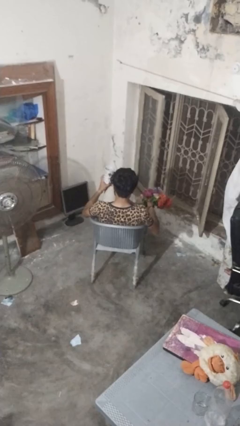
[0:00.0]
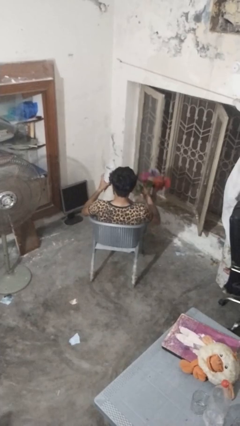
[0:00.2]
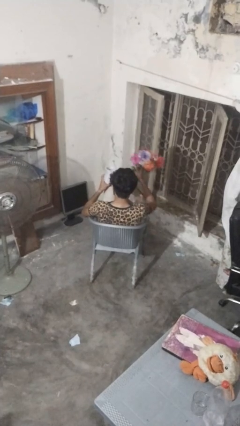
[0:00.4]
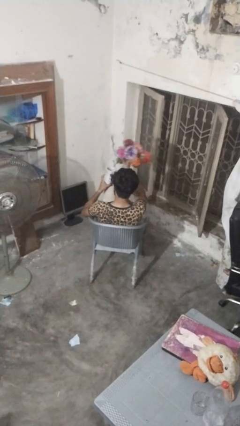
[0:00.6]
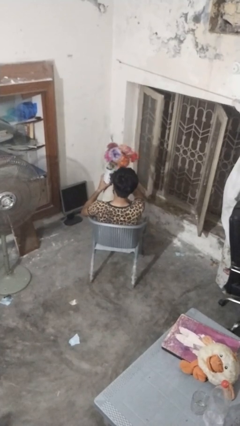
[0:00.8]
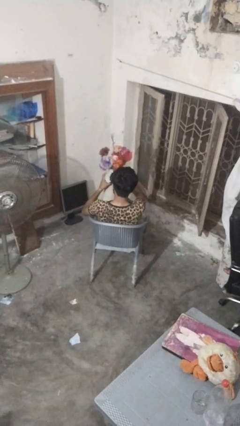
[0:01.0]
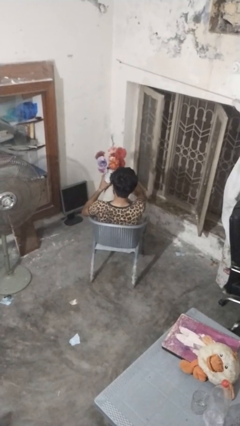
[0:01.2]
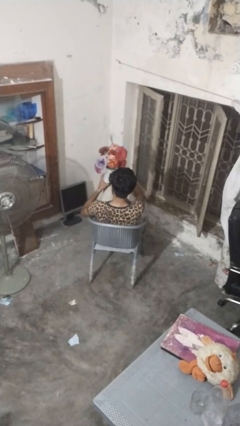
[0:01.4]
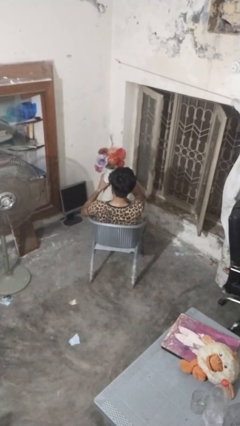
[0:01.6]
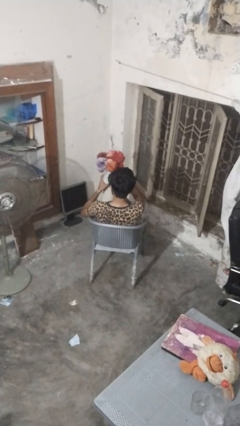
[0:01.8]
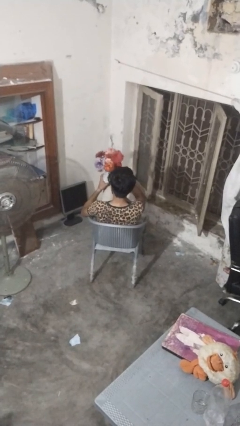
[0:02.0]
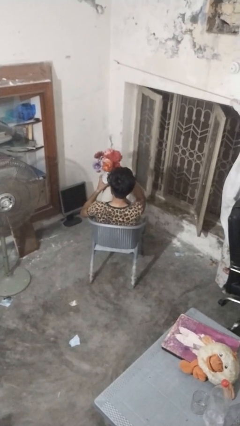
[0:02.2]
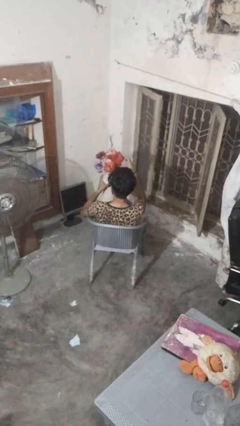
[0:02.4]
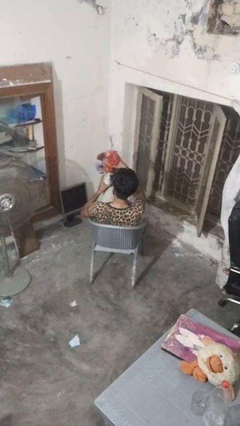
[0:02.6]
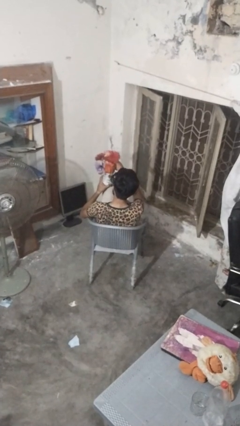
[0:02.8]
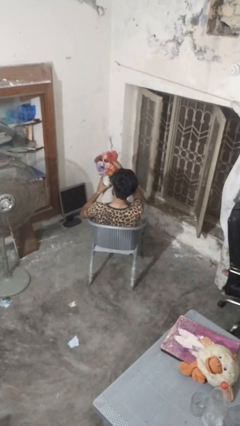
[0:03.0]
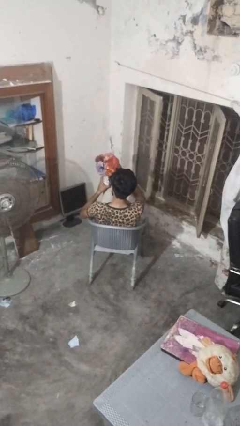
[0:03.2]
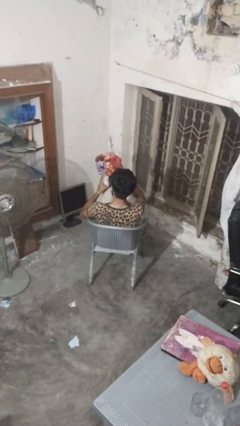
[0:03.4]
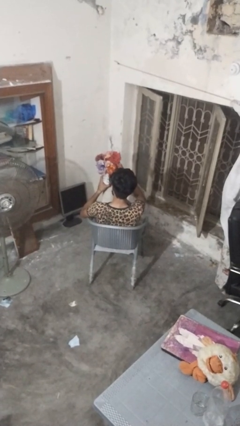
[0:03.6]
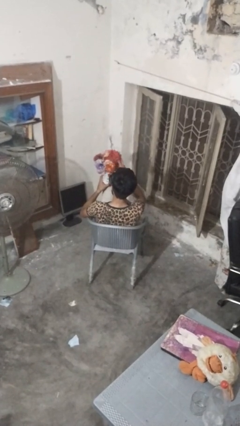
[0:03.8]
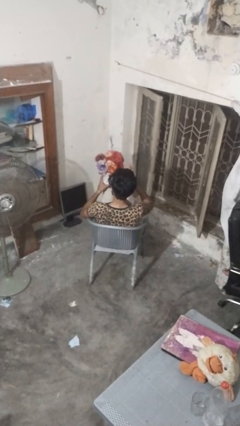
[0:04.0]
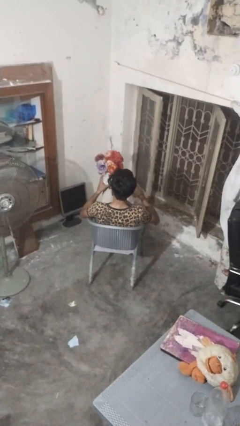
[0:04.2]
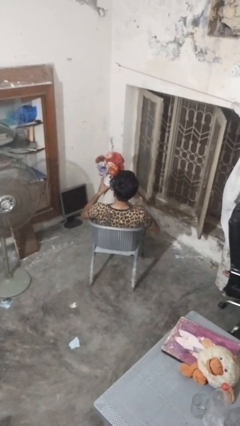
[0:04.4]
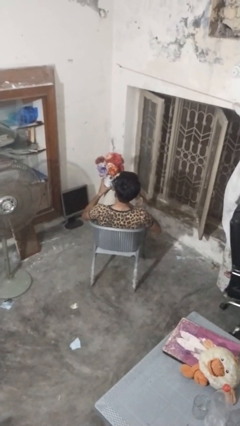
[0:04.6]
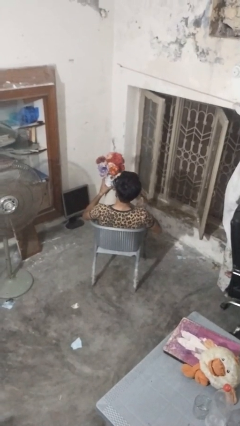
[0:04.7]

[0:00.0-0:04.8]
person arranges flowers in vase

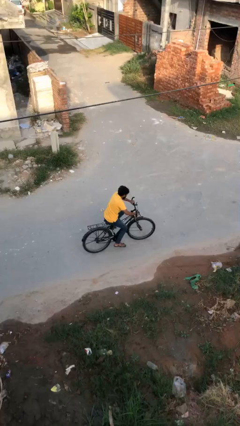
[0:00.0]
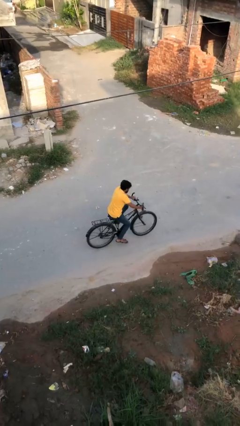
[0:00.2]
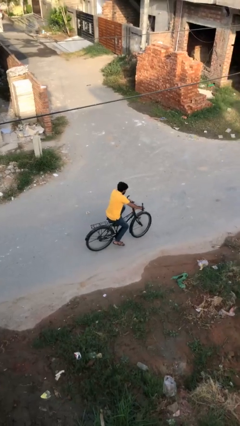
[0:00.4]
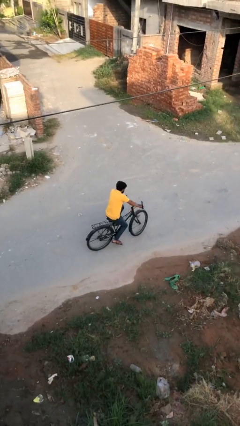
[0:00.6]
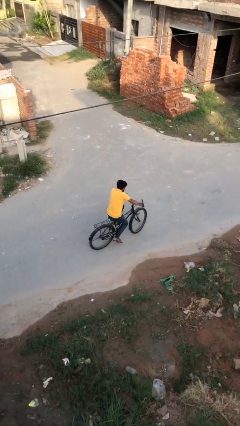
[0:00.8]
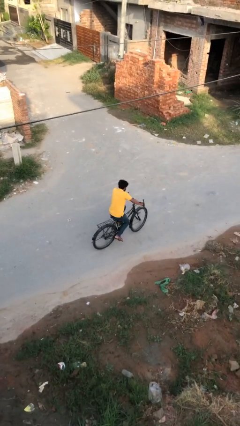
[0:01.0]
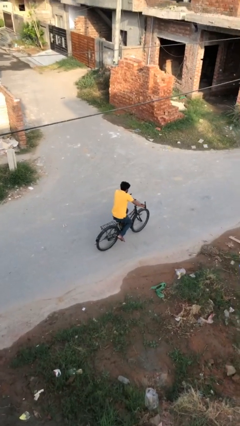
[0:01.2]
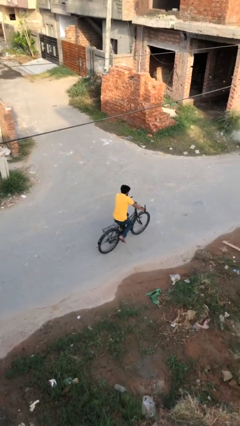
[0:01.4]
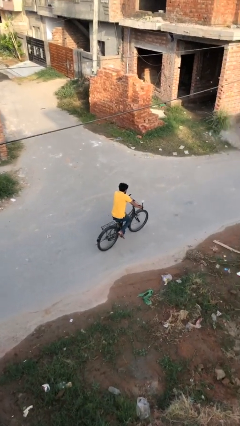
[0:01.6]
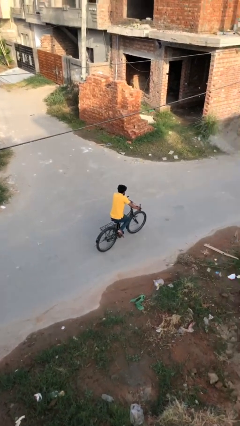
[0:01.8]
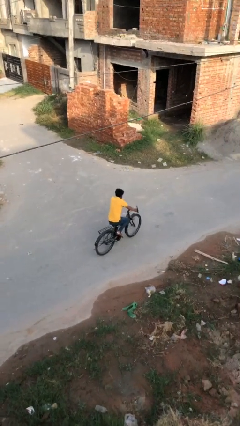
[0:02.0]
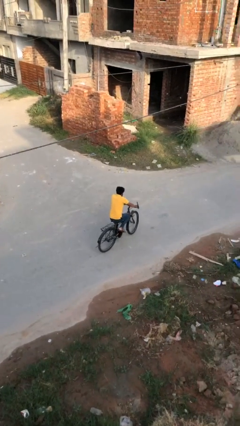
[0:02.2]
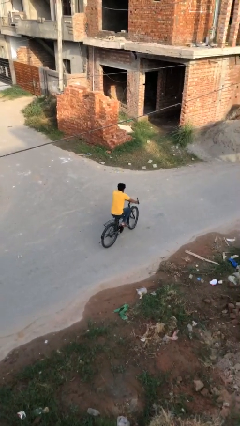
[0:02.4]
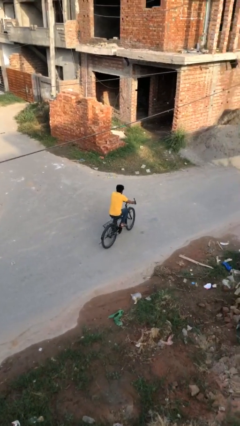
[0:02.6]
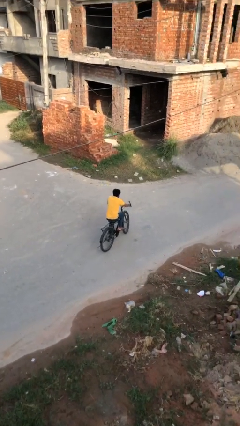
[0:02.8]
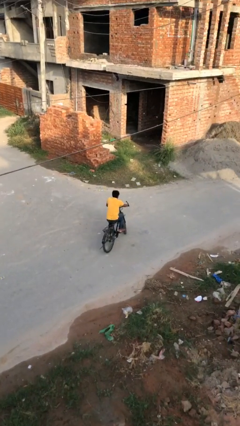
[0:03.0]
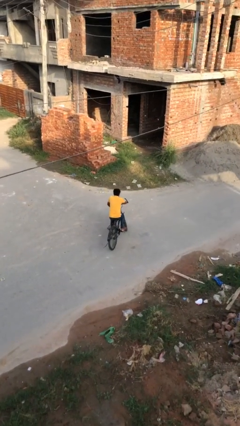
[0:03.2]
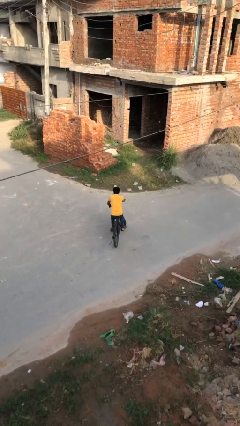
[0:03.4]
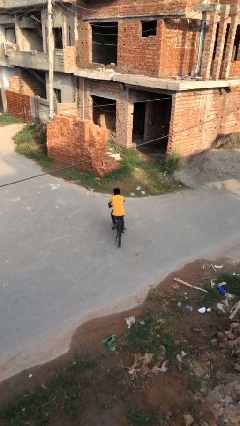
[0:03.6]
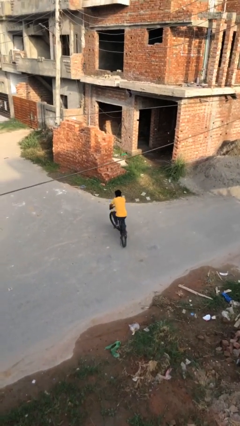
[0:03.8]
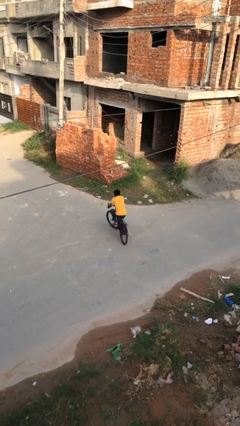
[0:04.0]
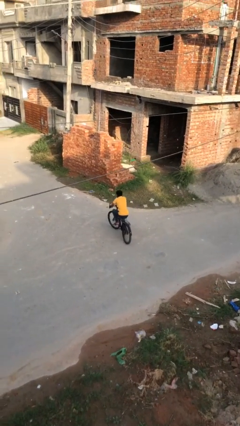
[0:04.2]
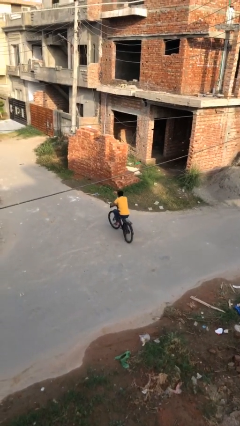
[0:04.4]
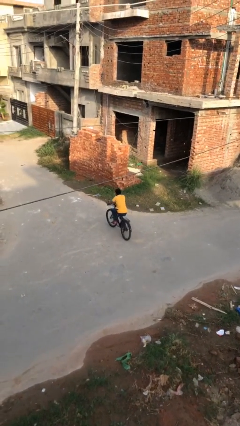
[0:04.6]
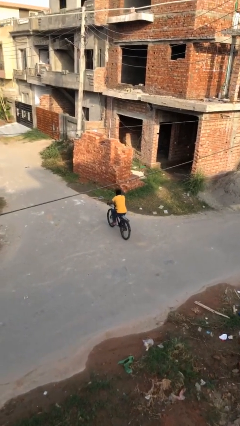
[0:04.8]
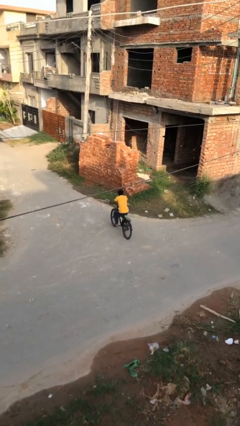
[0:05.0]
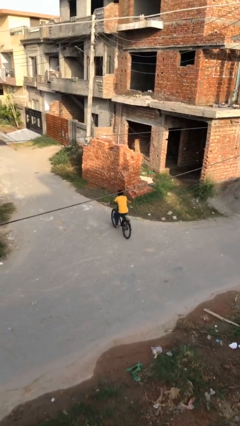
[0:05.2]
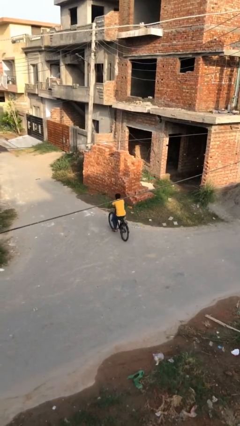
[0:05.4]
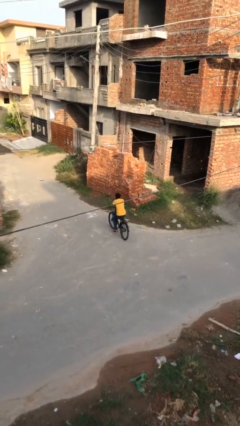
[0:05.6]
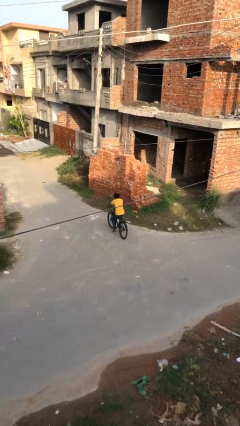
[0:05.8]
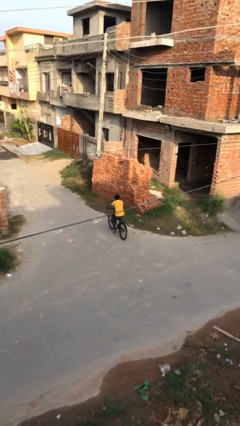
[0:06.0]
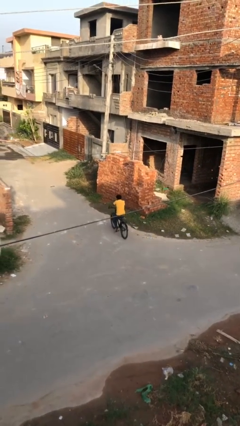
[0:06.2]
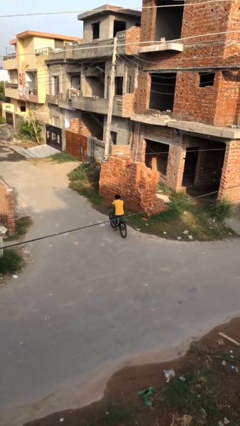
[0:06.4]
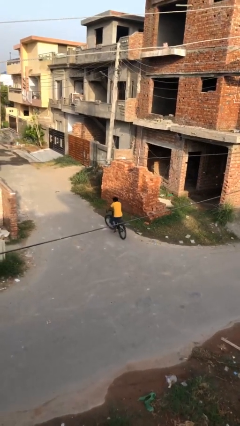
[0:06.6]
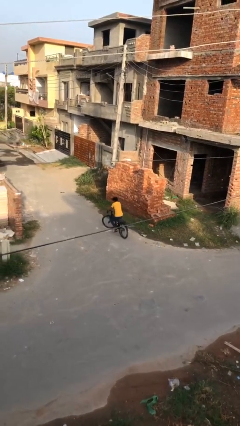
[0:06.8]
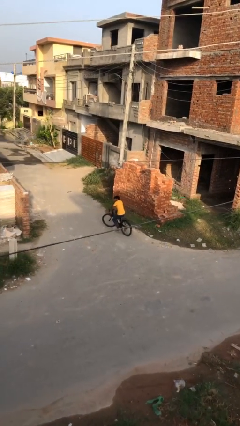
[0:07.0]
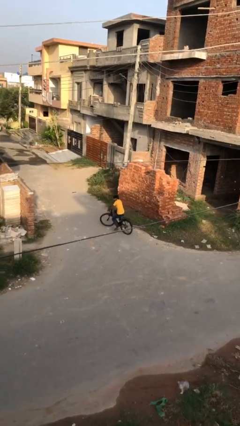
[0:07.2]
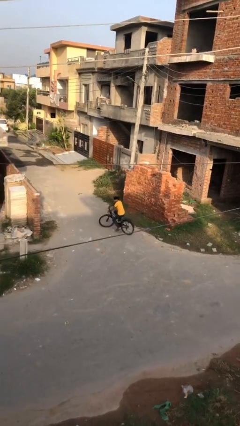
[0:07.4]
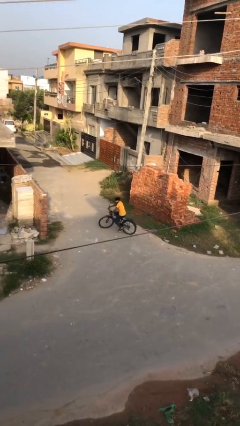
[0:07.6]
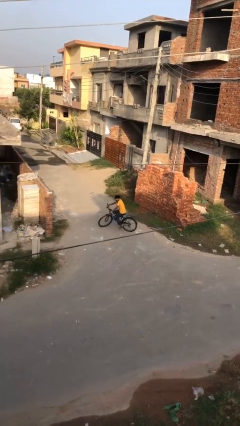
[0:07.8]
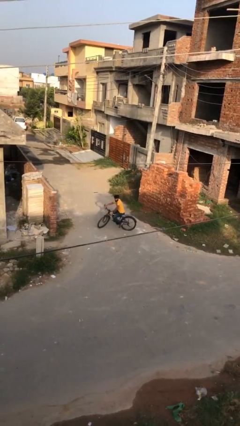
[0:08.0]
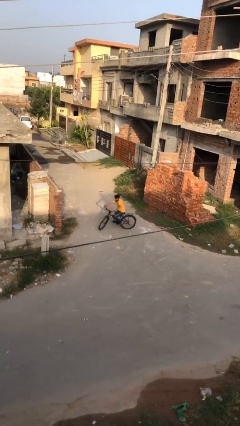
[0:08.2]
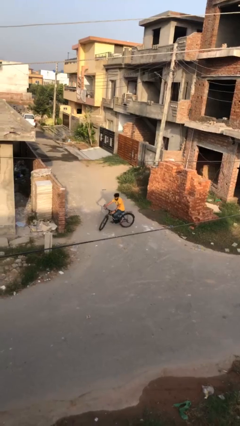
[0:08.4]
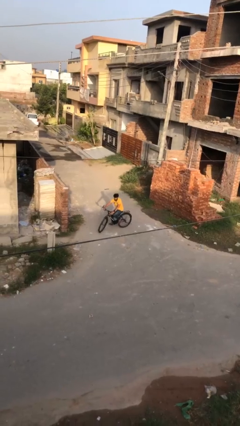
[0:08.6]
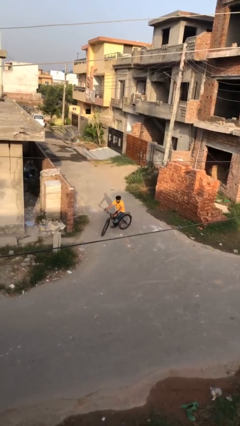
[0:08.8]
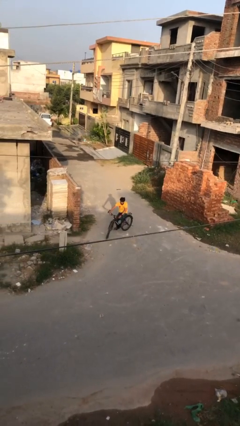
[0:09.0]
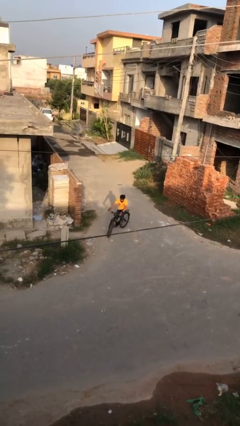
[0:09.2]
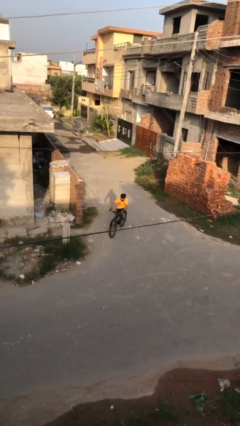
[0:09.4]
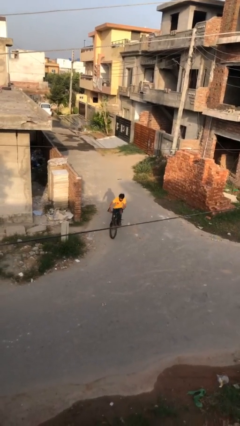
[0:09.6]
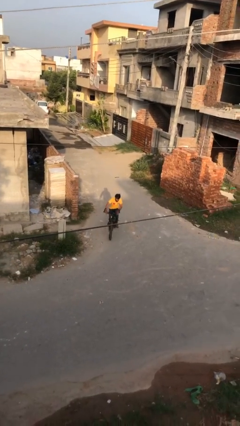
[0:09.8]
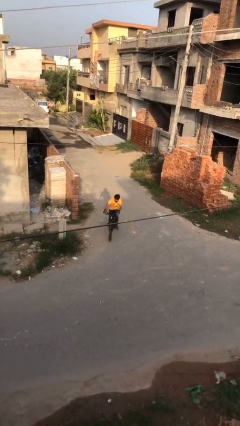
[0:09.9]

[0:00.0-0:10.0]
person rides bicycle

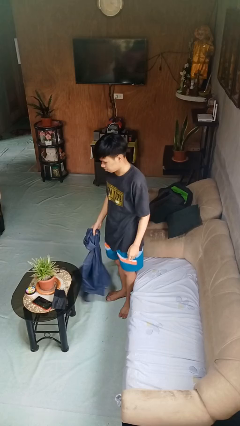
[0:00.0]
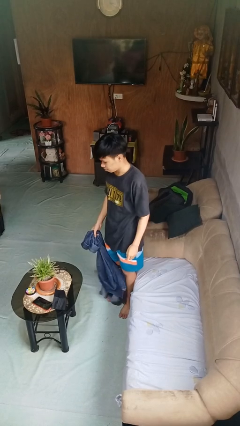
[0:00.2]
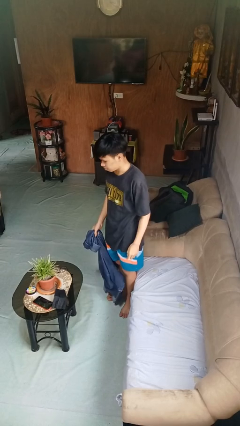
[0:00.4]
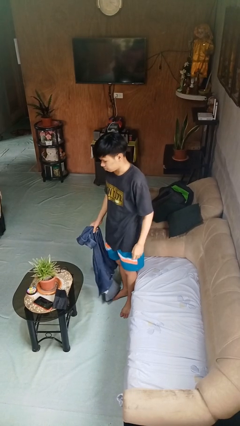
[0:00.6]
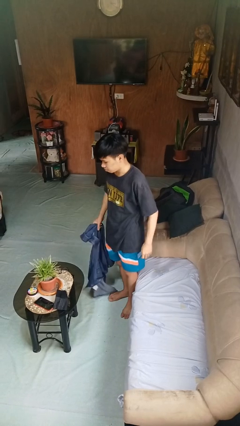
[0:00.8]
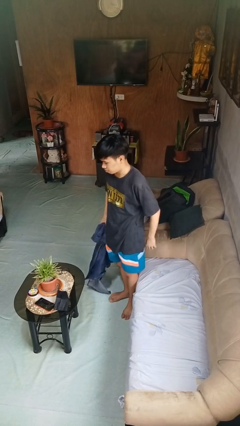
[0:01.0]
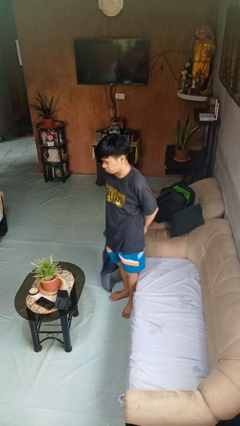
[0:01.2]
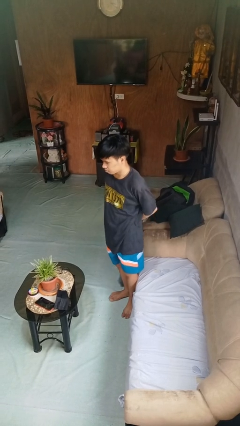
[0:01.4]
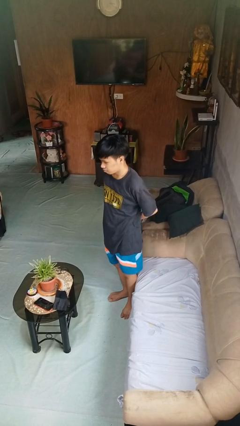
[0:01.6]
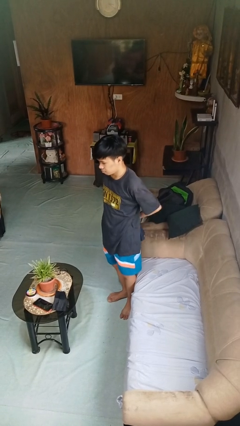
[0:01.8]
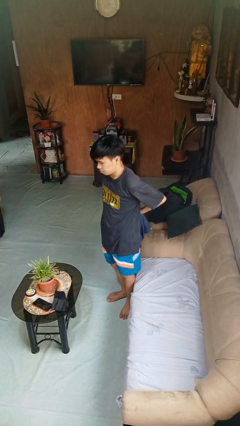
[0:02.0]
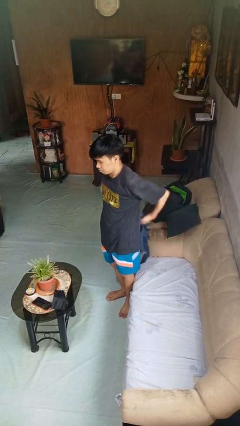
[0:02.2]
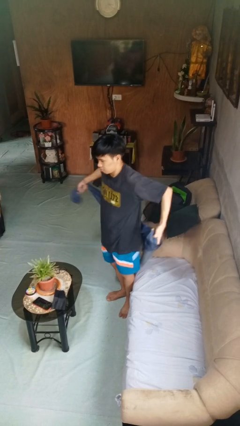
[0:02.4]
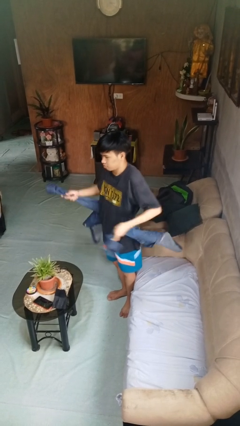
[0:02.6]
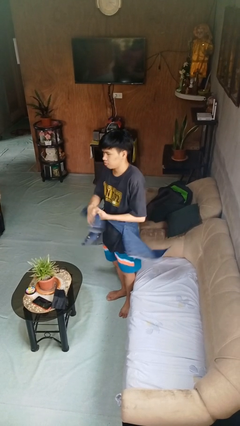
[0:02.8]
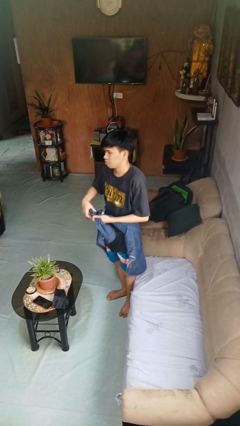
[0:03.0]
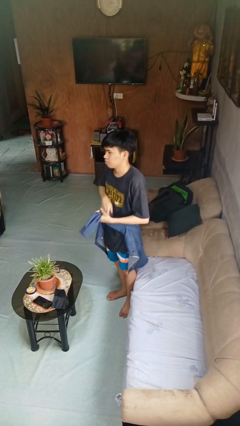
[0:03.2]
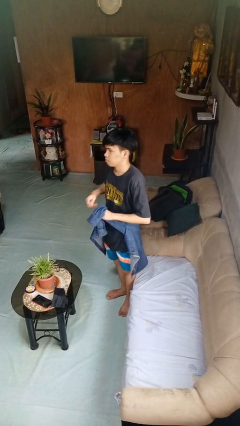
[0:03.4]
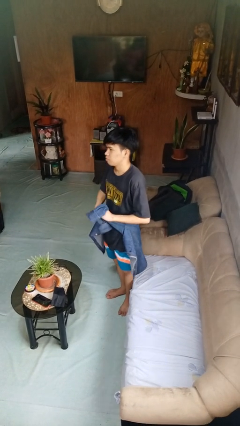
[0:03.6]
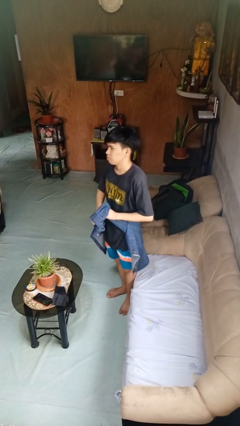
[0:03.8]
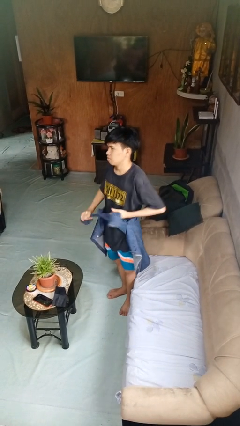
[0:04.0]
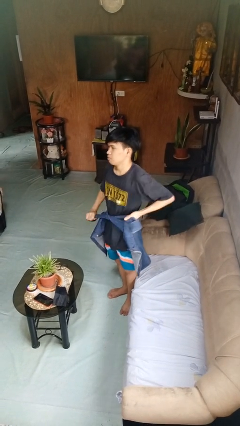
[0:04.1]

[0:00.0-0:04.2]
person ties jacket around waist
